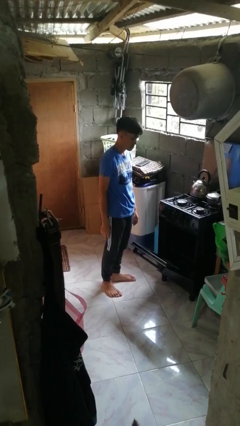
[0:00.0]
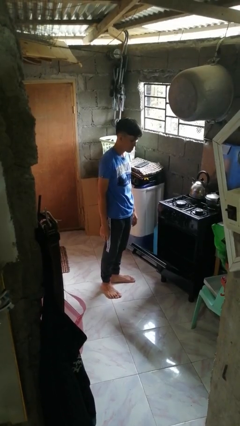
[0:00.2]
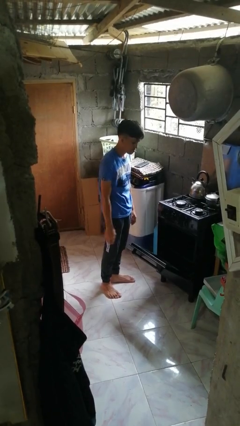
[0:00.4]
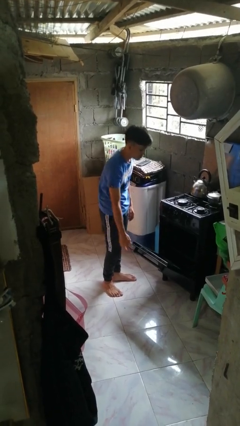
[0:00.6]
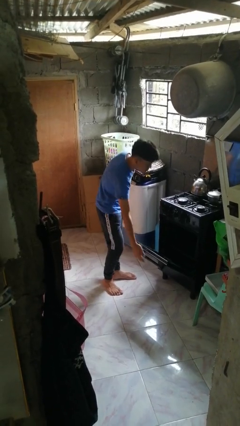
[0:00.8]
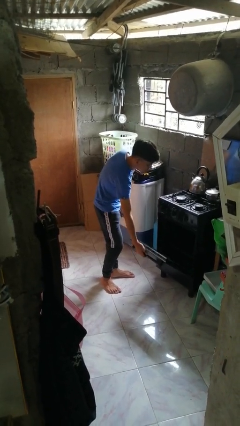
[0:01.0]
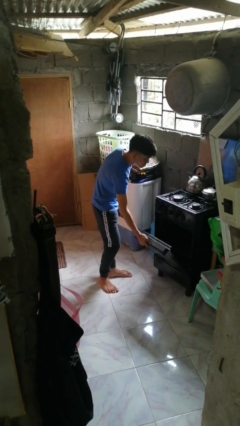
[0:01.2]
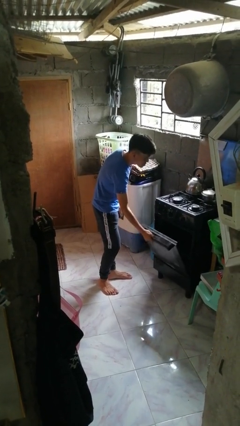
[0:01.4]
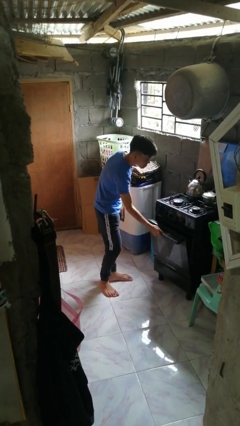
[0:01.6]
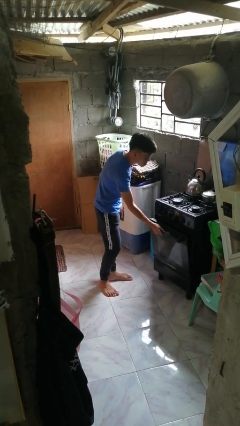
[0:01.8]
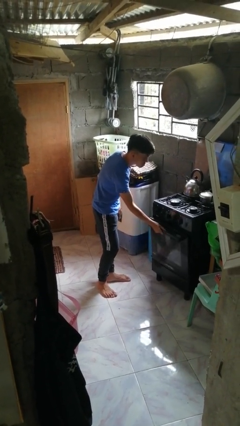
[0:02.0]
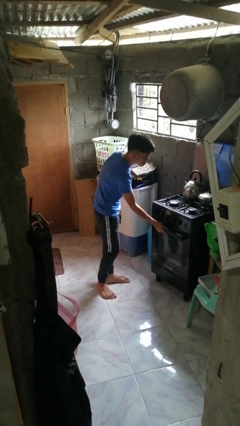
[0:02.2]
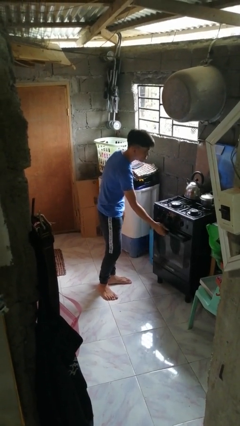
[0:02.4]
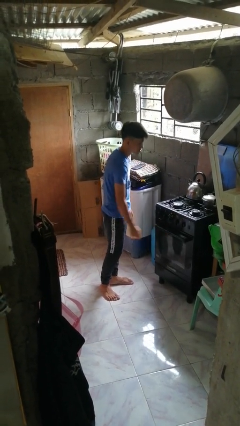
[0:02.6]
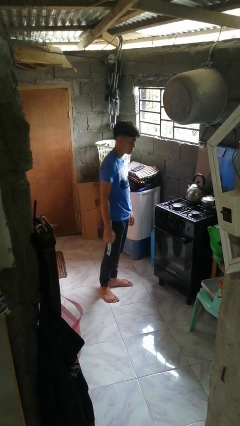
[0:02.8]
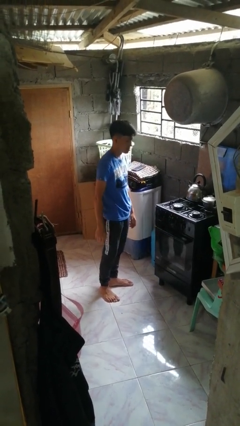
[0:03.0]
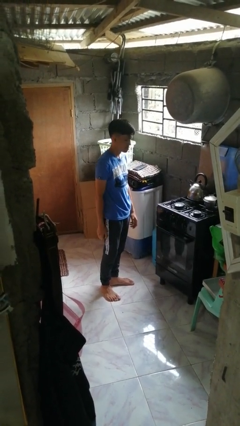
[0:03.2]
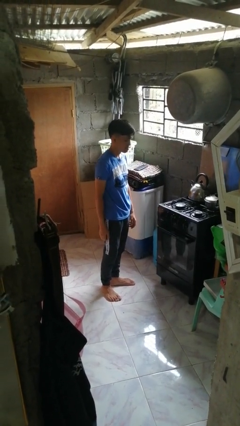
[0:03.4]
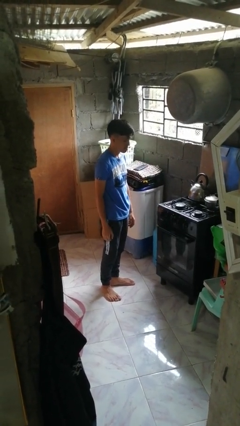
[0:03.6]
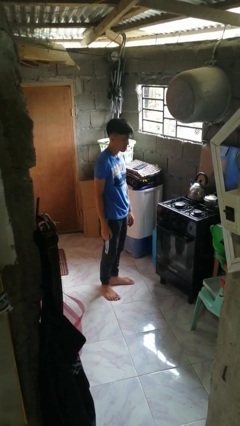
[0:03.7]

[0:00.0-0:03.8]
person closes oven door

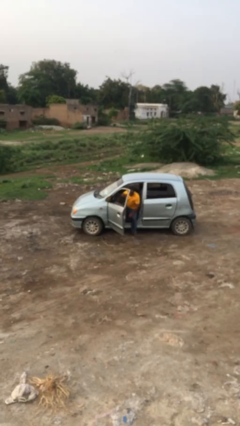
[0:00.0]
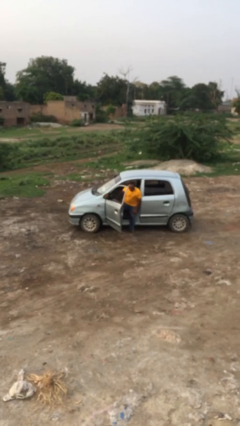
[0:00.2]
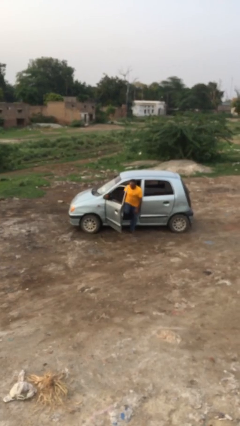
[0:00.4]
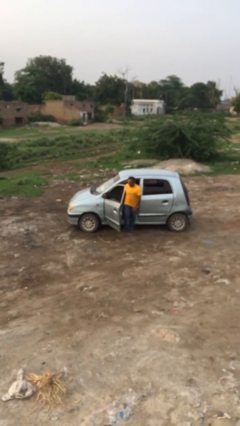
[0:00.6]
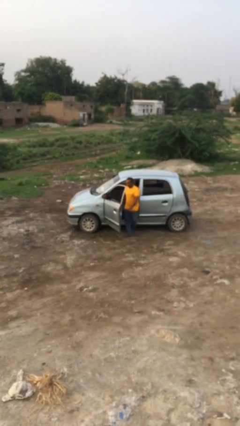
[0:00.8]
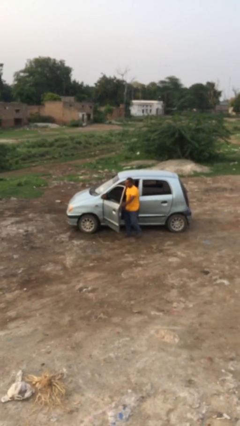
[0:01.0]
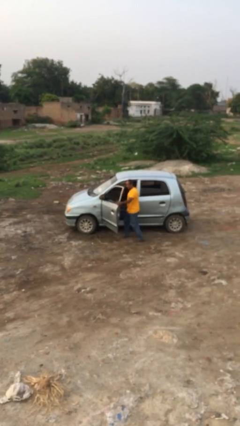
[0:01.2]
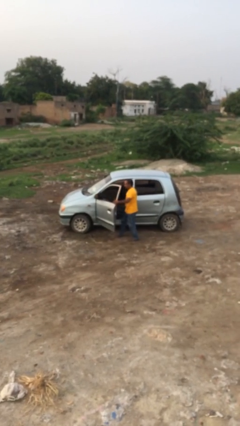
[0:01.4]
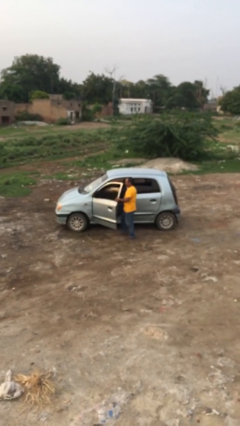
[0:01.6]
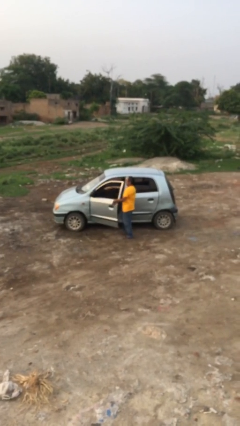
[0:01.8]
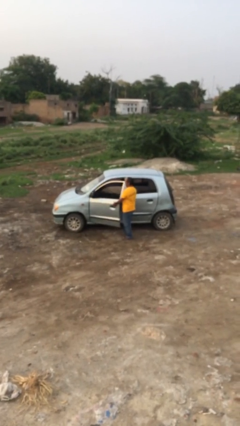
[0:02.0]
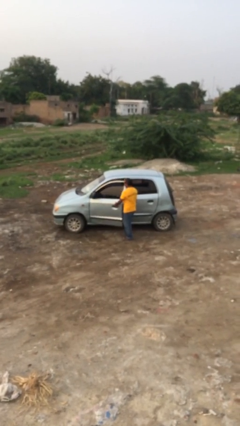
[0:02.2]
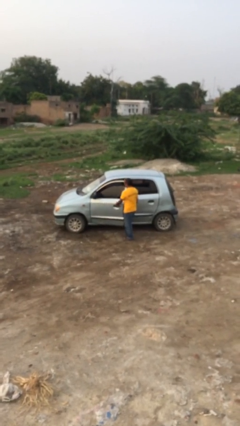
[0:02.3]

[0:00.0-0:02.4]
person closes car door

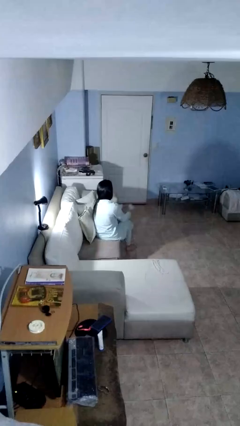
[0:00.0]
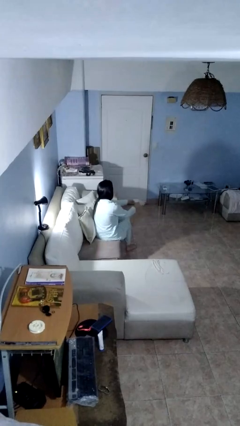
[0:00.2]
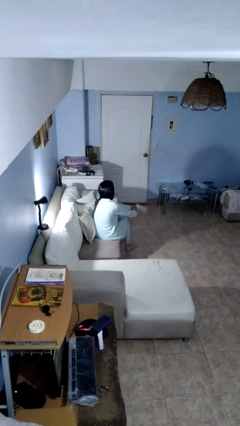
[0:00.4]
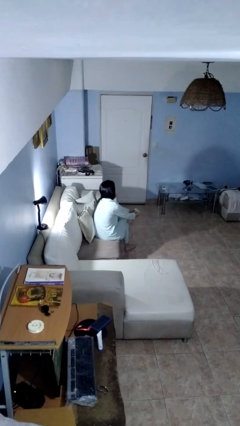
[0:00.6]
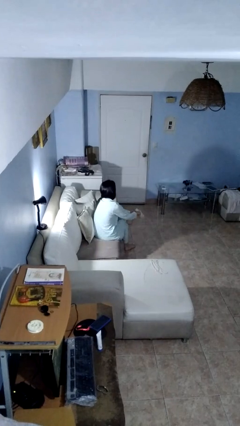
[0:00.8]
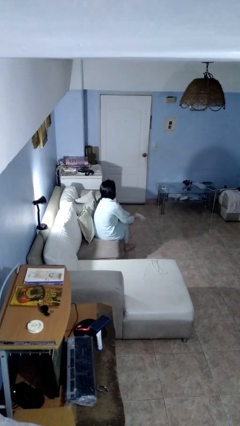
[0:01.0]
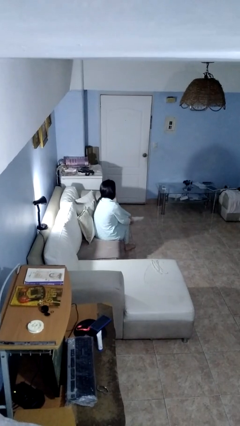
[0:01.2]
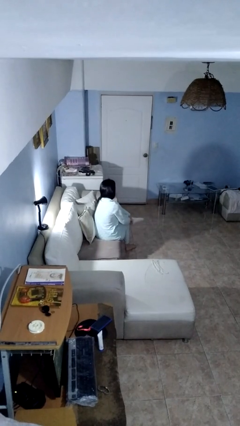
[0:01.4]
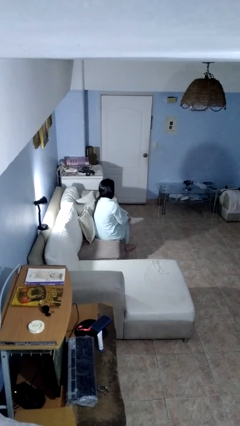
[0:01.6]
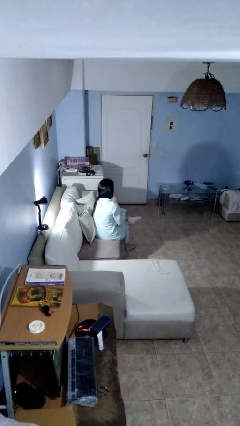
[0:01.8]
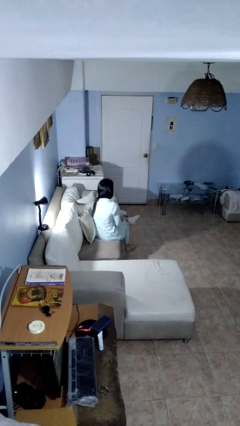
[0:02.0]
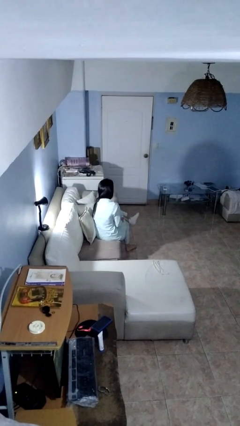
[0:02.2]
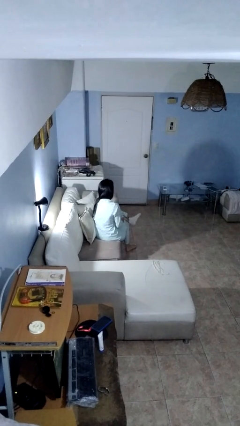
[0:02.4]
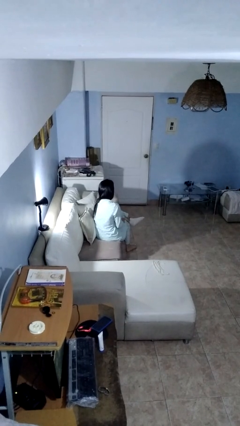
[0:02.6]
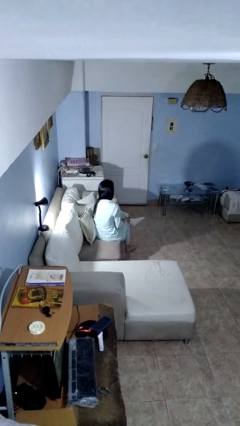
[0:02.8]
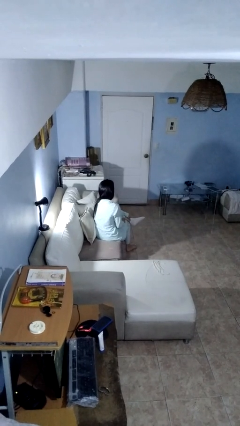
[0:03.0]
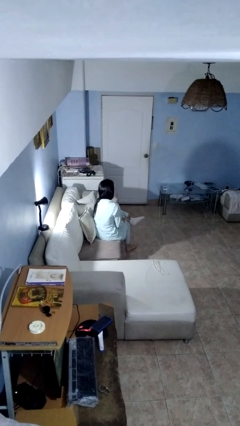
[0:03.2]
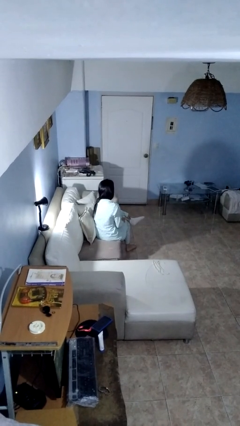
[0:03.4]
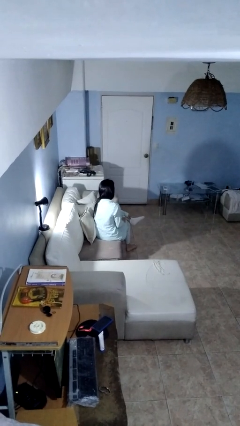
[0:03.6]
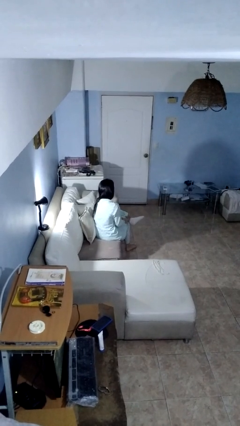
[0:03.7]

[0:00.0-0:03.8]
person puts on socks

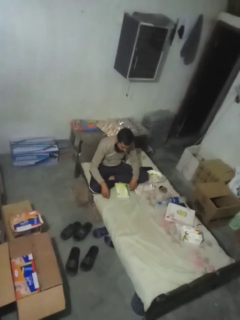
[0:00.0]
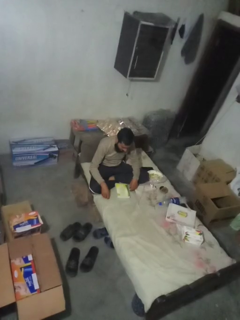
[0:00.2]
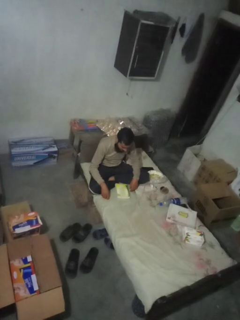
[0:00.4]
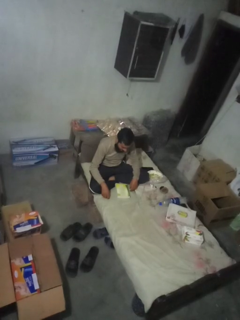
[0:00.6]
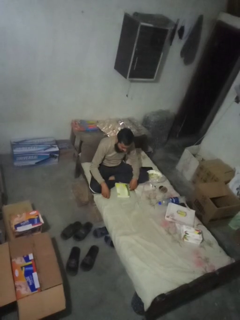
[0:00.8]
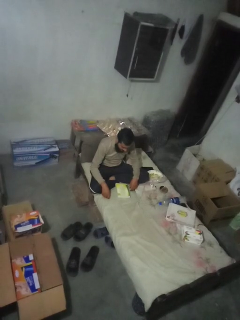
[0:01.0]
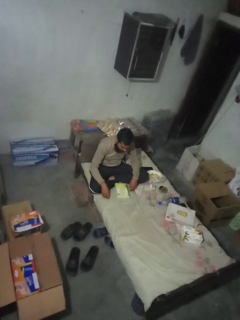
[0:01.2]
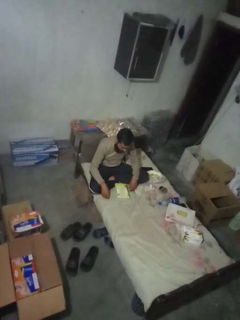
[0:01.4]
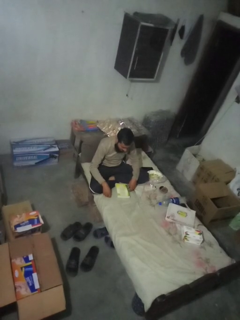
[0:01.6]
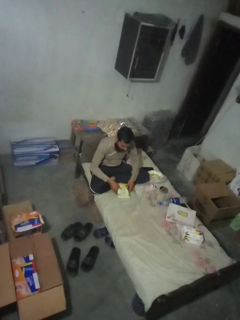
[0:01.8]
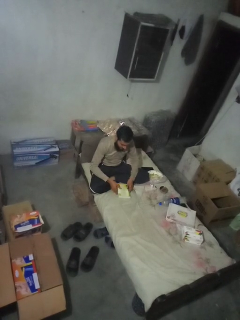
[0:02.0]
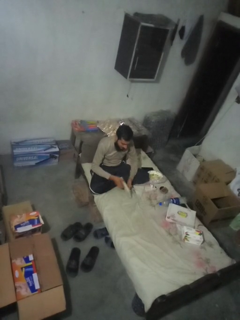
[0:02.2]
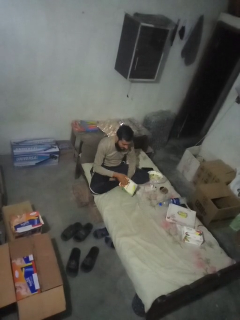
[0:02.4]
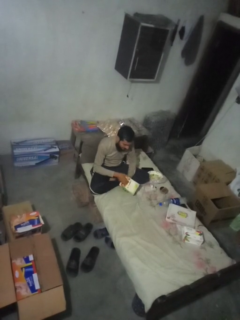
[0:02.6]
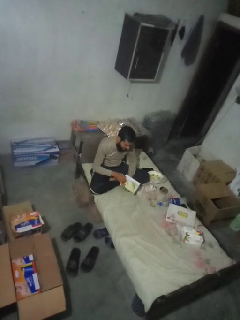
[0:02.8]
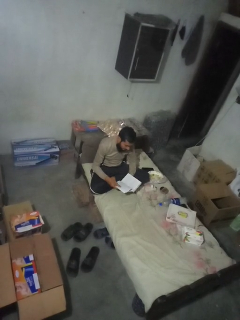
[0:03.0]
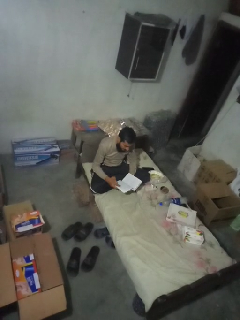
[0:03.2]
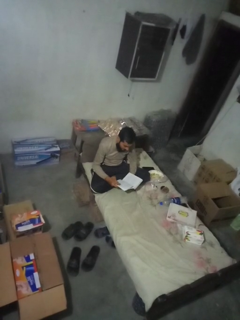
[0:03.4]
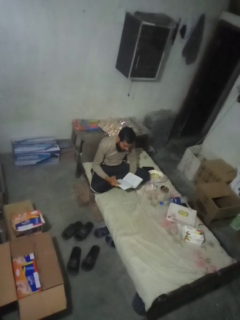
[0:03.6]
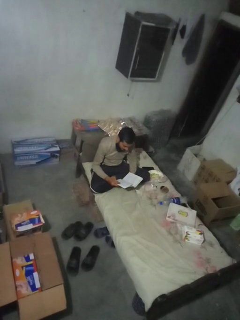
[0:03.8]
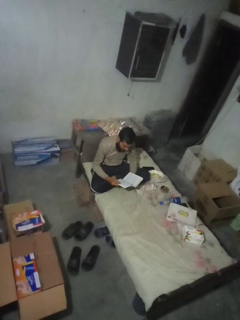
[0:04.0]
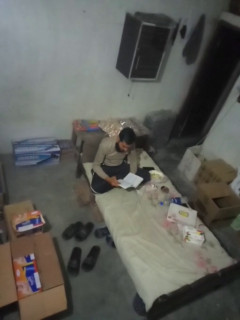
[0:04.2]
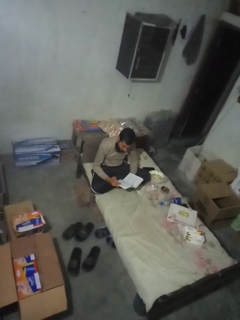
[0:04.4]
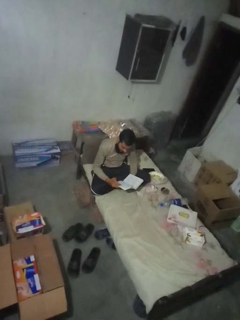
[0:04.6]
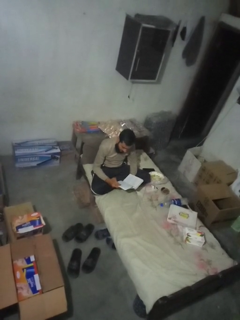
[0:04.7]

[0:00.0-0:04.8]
person reads book

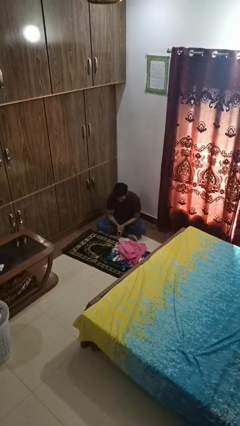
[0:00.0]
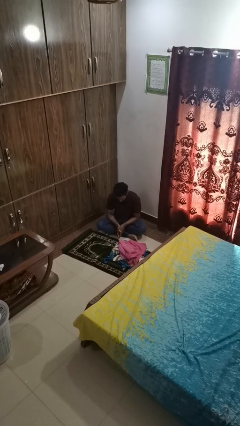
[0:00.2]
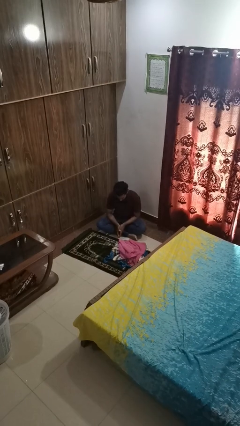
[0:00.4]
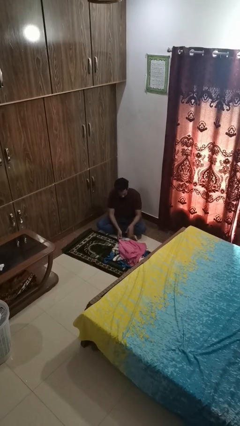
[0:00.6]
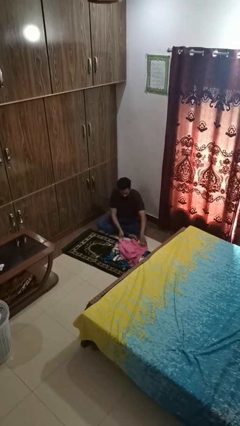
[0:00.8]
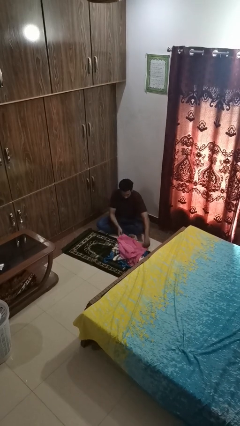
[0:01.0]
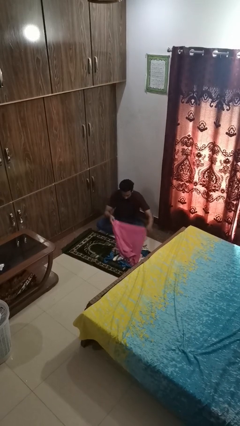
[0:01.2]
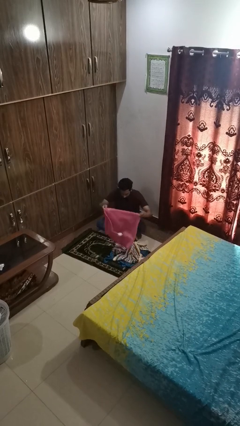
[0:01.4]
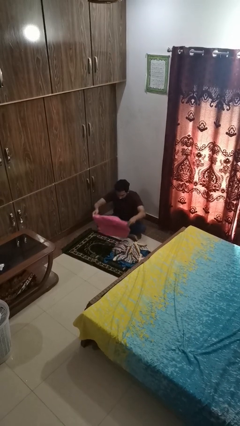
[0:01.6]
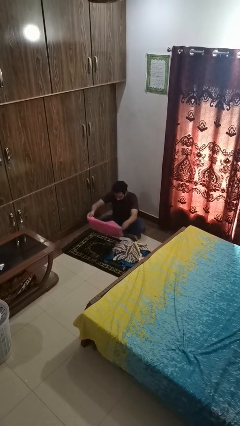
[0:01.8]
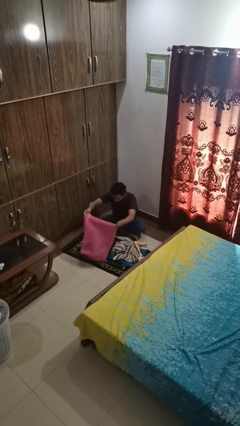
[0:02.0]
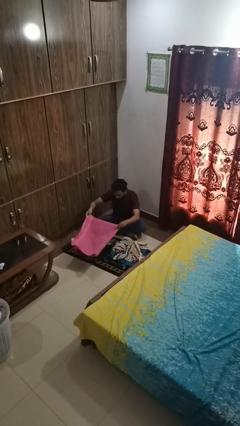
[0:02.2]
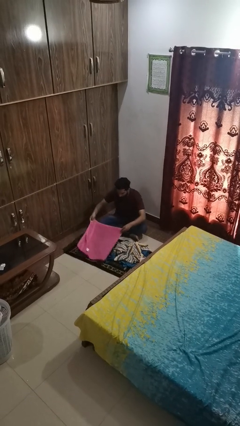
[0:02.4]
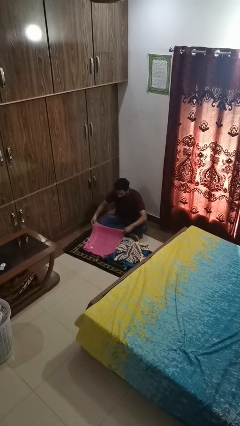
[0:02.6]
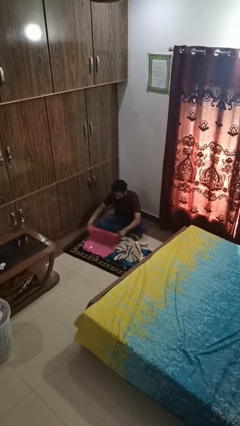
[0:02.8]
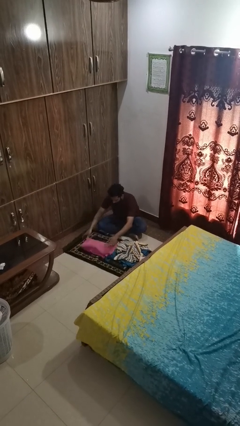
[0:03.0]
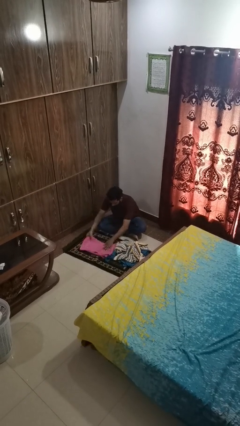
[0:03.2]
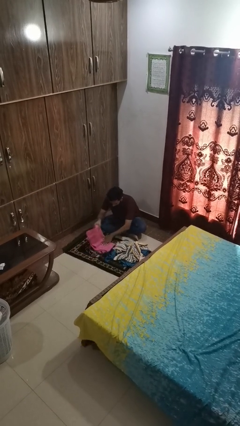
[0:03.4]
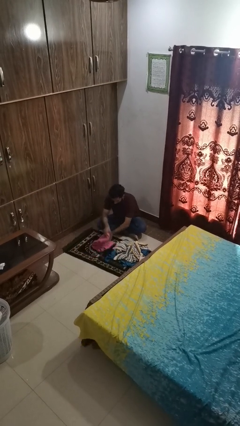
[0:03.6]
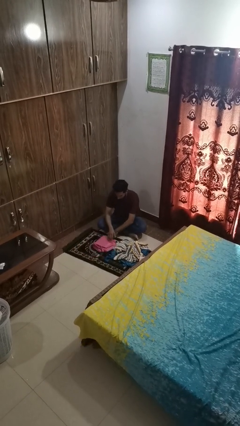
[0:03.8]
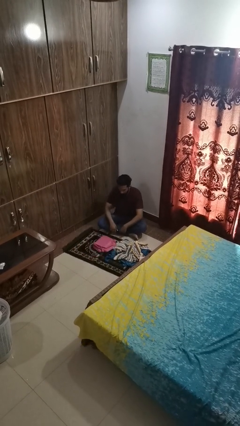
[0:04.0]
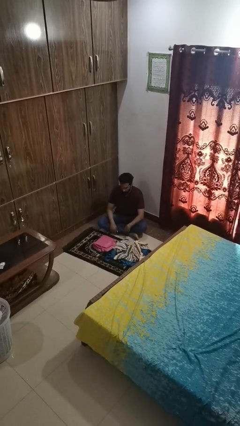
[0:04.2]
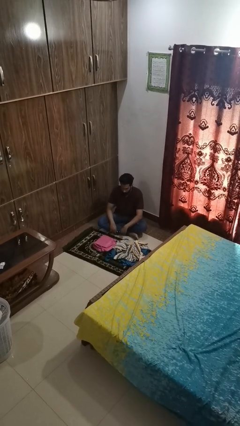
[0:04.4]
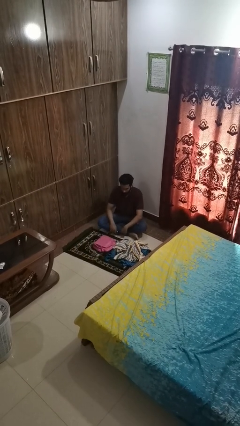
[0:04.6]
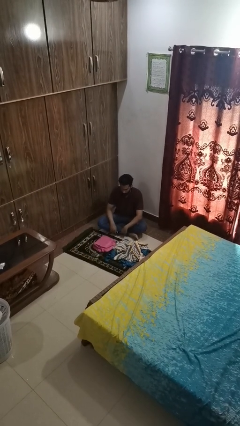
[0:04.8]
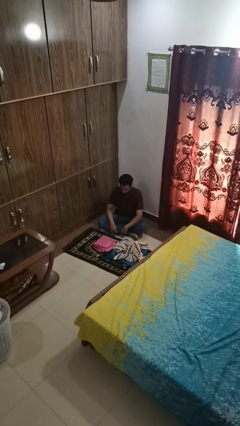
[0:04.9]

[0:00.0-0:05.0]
person folds towel
